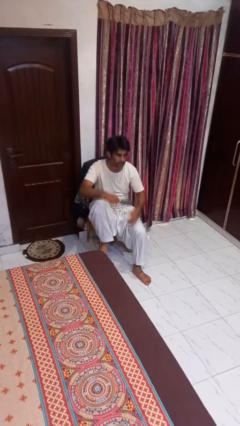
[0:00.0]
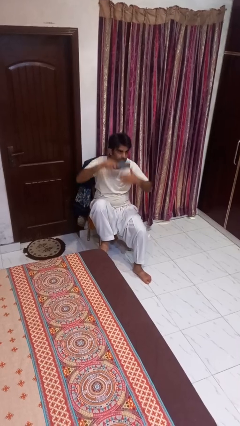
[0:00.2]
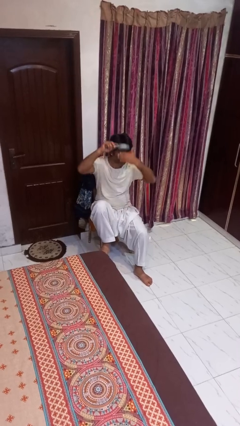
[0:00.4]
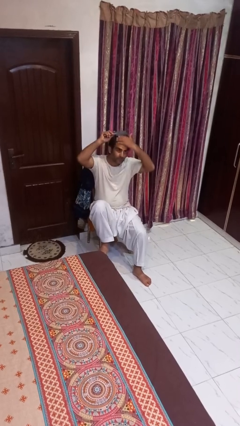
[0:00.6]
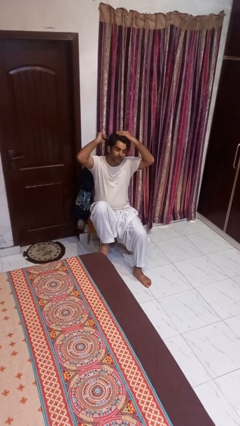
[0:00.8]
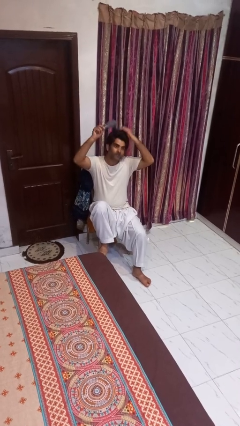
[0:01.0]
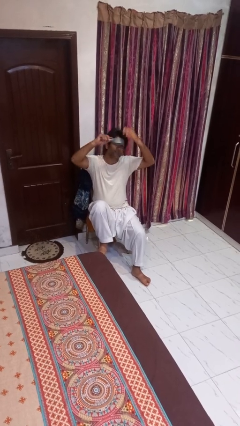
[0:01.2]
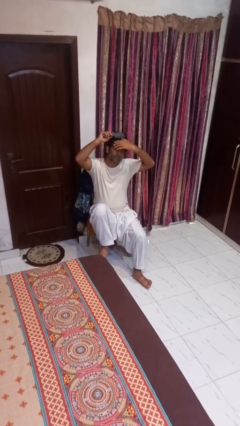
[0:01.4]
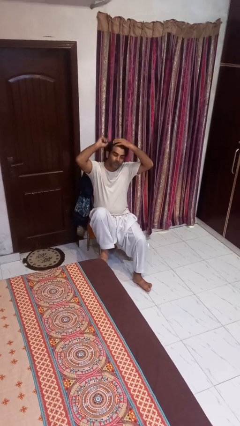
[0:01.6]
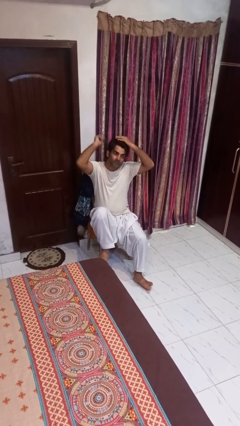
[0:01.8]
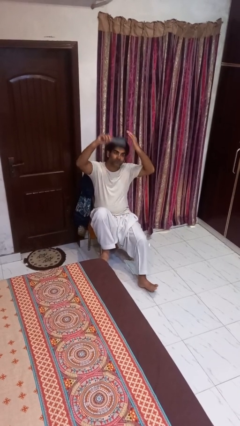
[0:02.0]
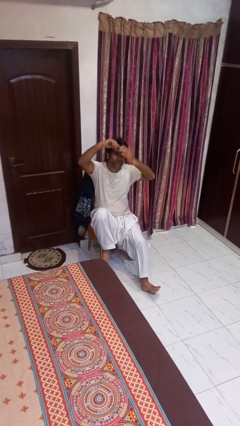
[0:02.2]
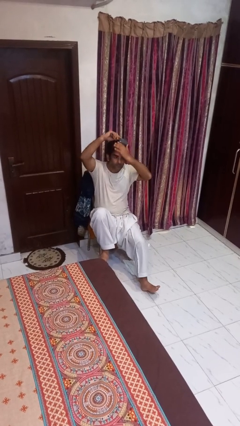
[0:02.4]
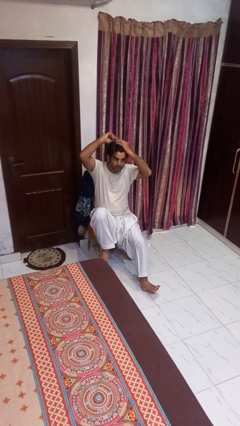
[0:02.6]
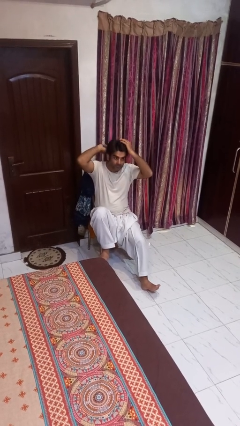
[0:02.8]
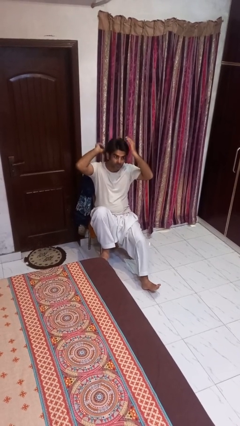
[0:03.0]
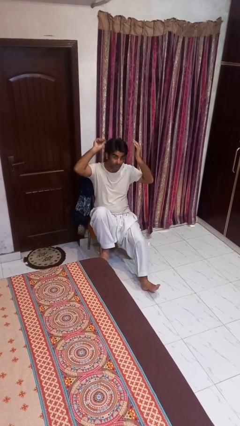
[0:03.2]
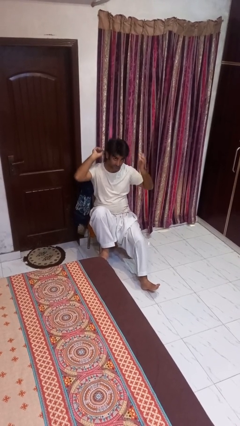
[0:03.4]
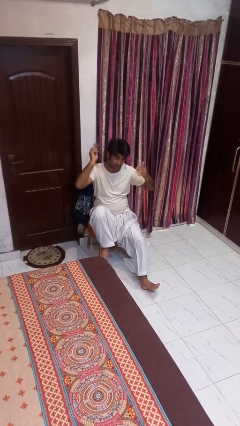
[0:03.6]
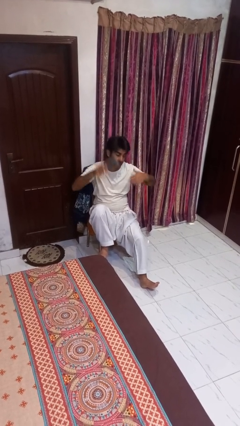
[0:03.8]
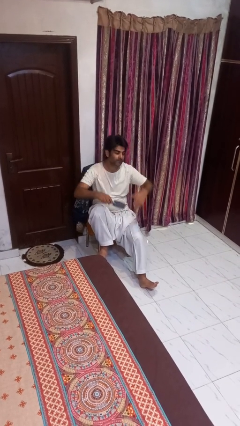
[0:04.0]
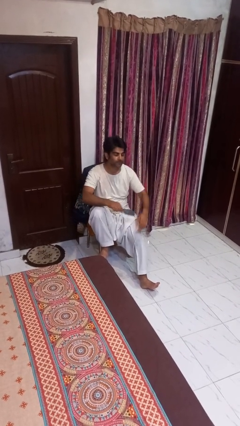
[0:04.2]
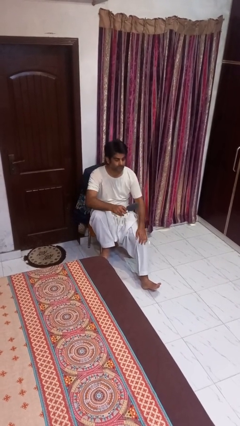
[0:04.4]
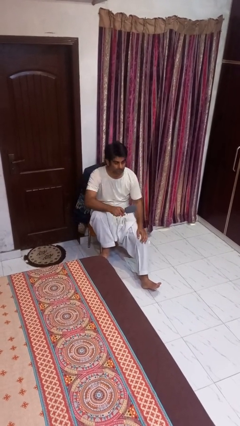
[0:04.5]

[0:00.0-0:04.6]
person brushes hair

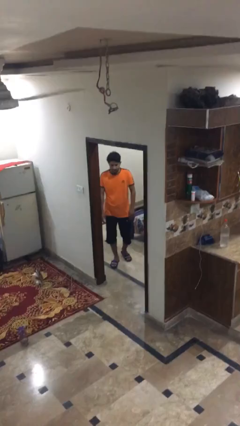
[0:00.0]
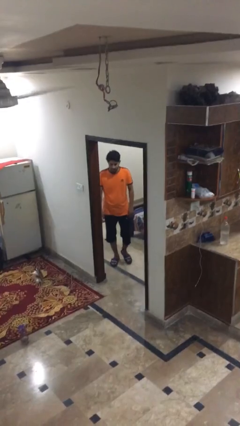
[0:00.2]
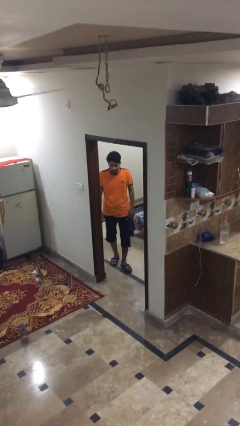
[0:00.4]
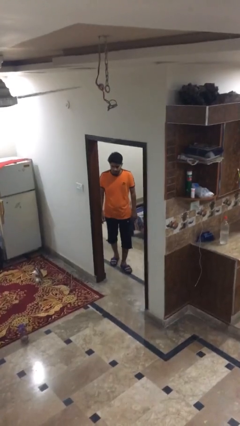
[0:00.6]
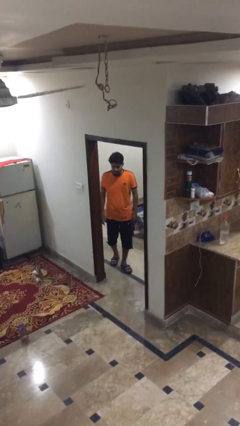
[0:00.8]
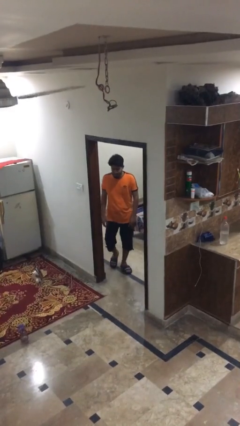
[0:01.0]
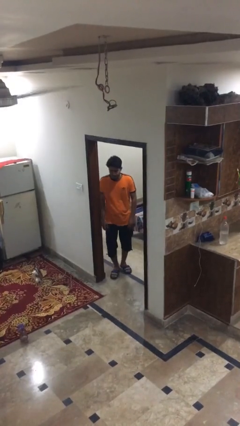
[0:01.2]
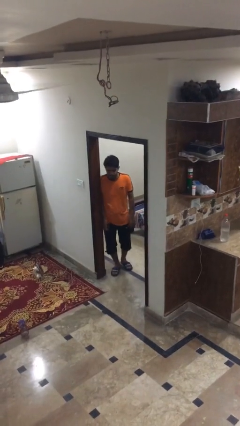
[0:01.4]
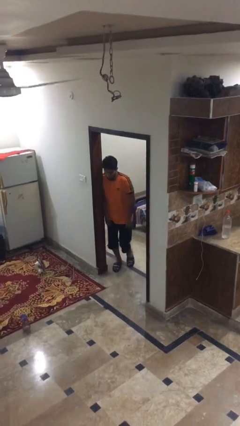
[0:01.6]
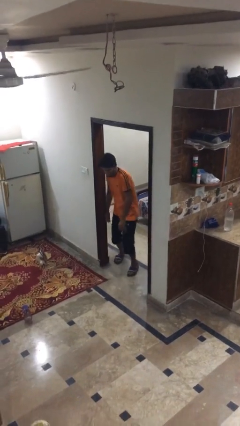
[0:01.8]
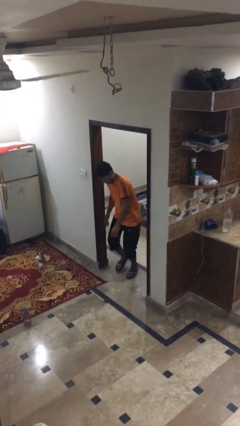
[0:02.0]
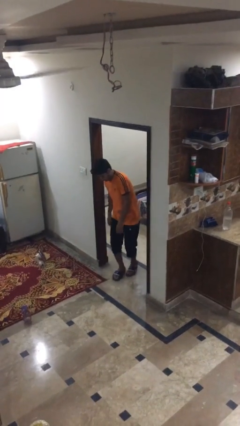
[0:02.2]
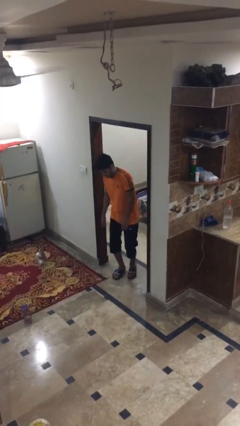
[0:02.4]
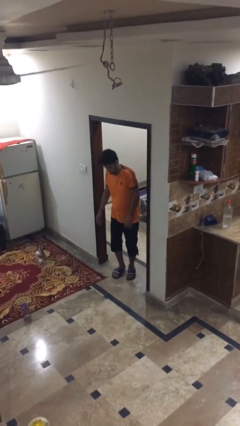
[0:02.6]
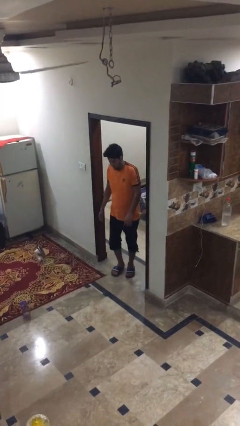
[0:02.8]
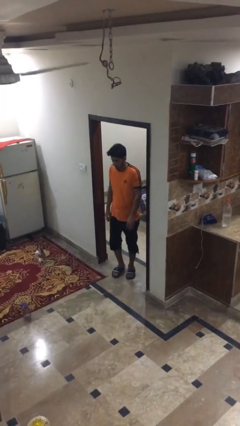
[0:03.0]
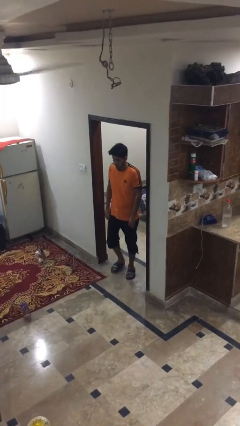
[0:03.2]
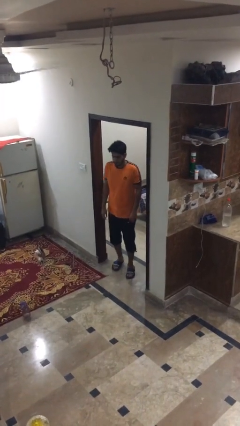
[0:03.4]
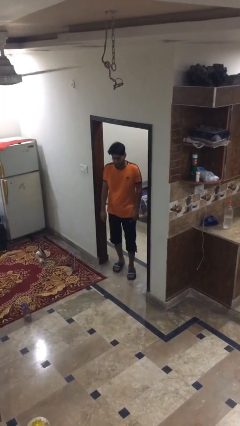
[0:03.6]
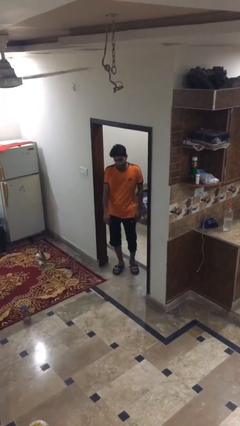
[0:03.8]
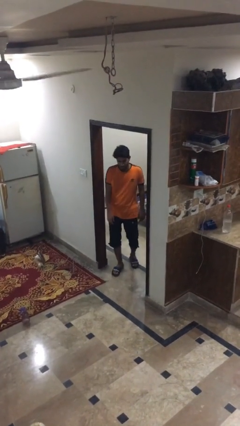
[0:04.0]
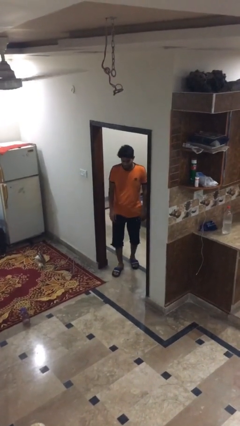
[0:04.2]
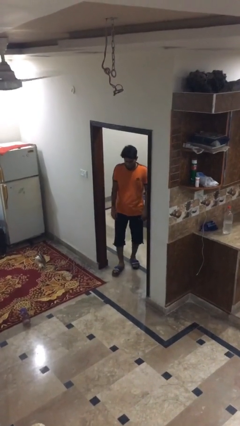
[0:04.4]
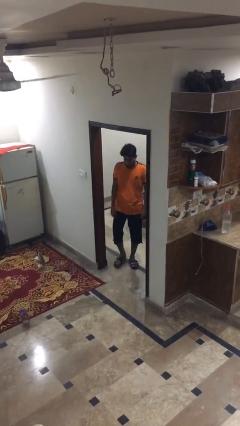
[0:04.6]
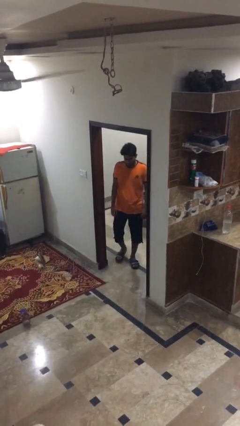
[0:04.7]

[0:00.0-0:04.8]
person bumps into wall

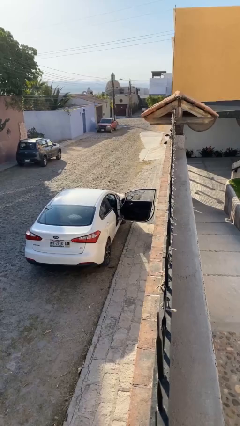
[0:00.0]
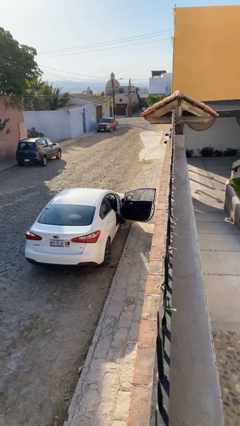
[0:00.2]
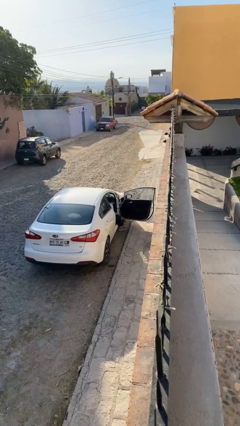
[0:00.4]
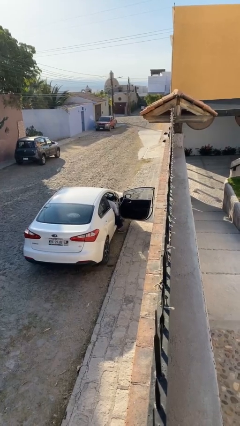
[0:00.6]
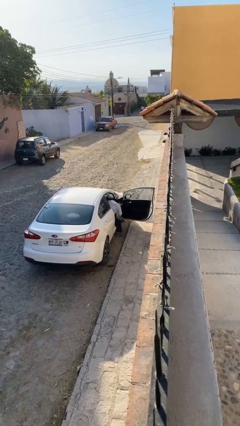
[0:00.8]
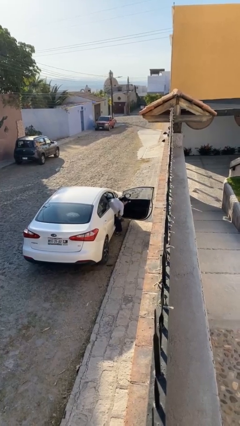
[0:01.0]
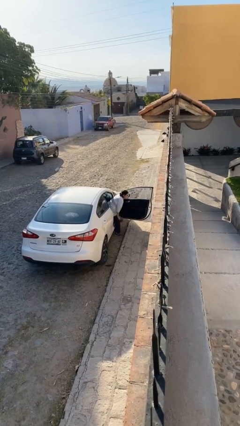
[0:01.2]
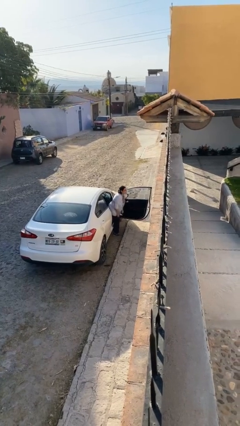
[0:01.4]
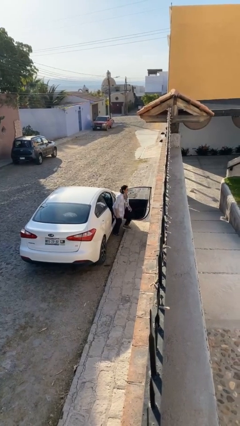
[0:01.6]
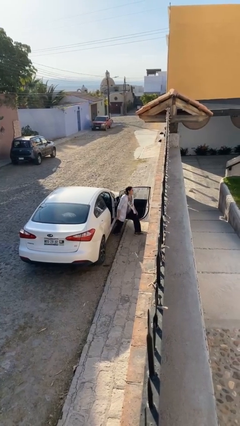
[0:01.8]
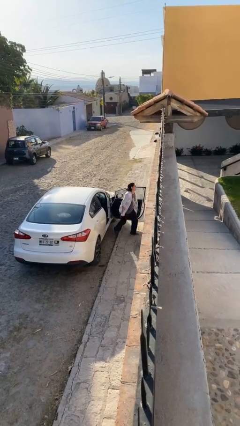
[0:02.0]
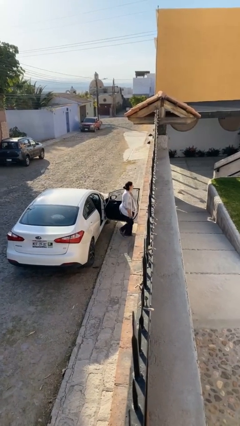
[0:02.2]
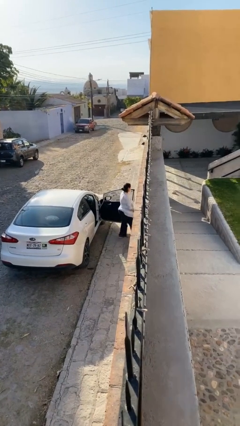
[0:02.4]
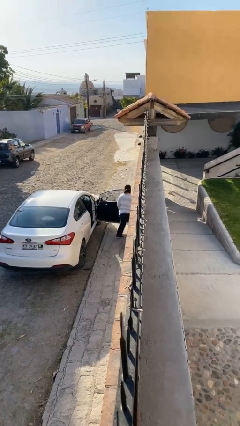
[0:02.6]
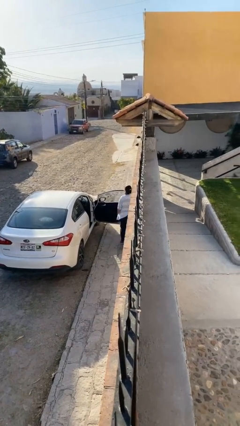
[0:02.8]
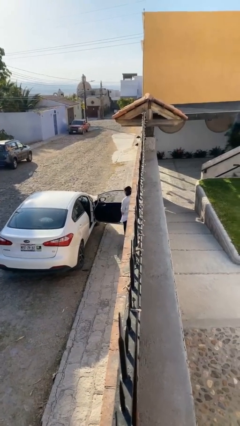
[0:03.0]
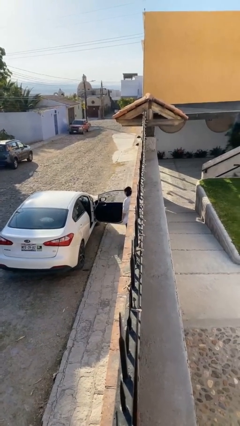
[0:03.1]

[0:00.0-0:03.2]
person exits car

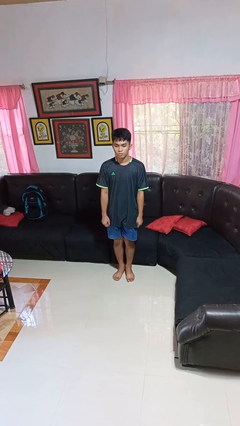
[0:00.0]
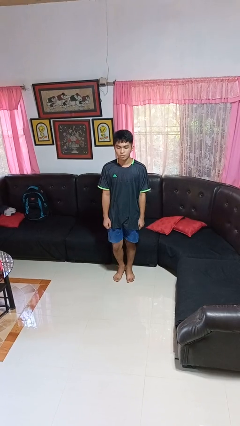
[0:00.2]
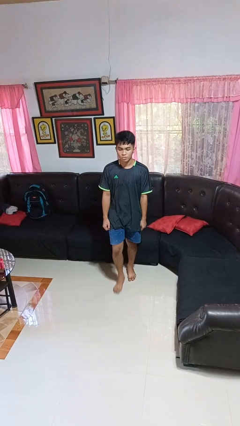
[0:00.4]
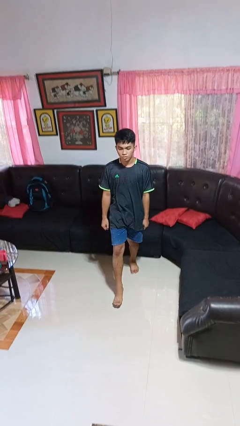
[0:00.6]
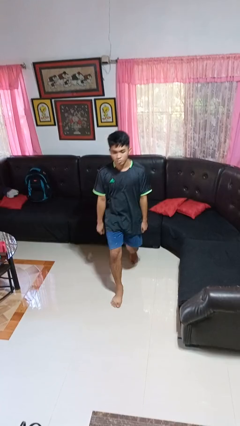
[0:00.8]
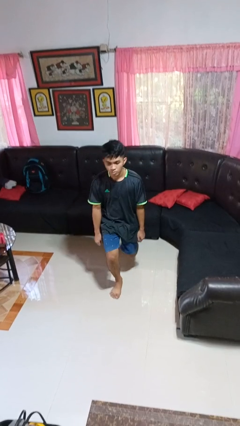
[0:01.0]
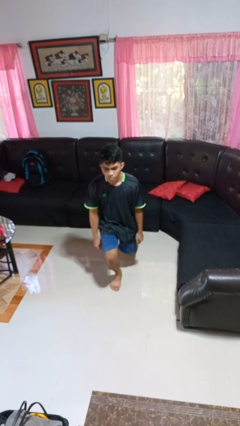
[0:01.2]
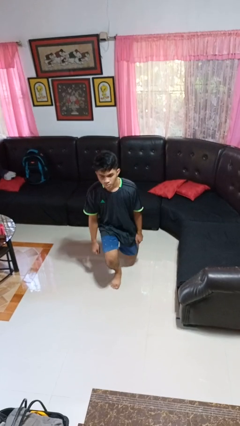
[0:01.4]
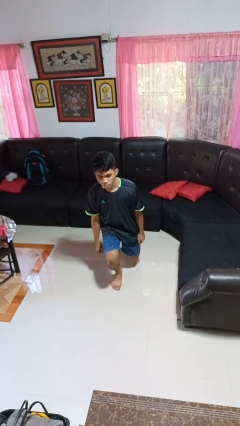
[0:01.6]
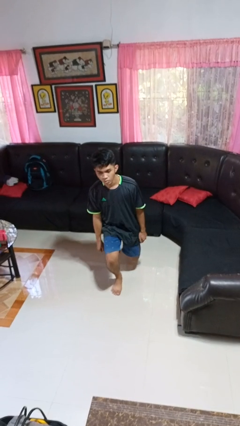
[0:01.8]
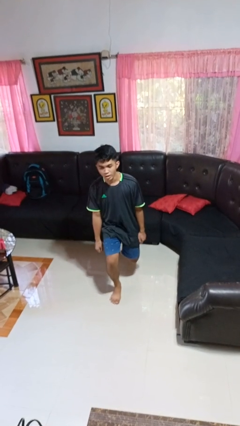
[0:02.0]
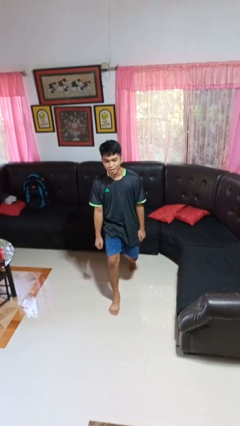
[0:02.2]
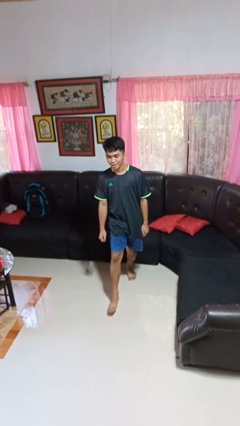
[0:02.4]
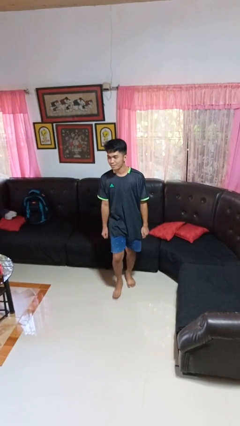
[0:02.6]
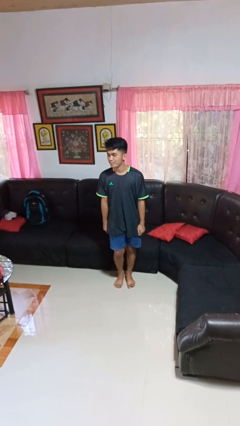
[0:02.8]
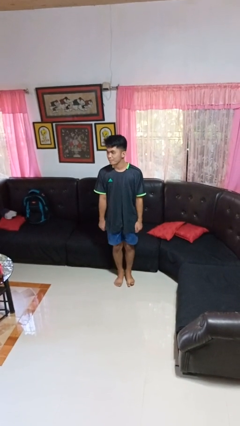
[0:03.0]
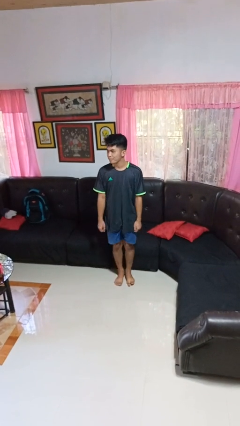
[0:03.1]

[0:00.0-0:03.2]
person exercises with lunges

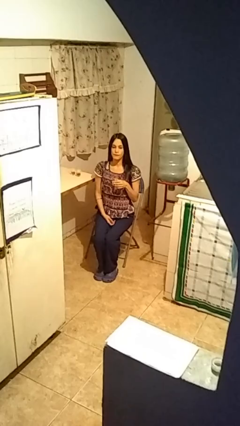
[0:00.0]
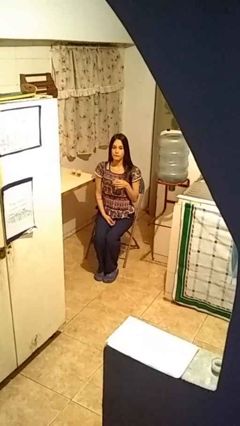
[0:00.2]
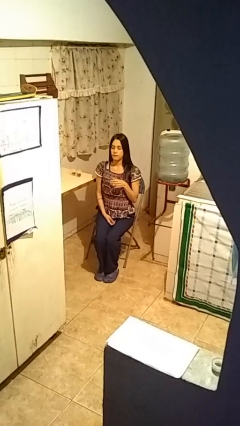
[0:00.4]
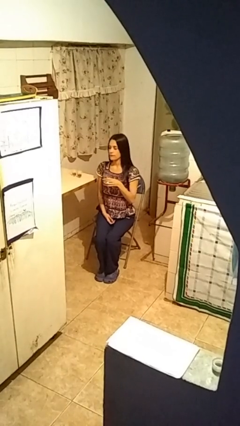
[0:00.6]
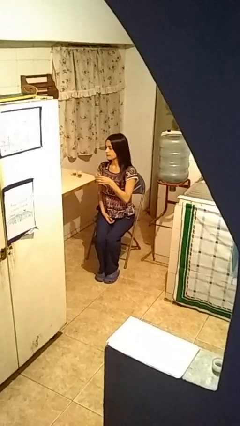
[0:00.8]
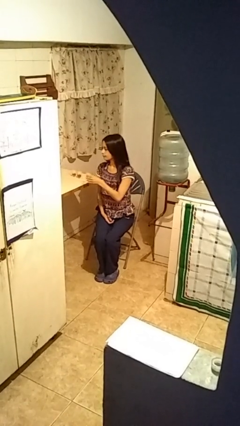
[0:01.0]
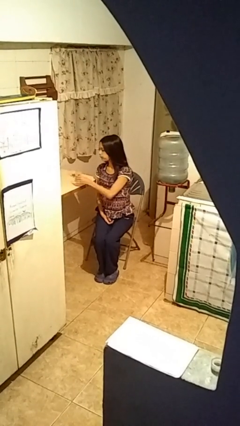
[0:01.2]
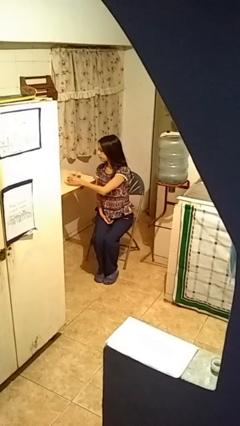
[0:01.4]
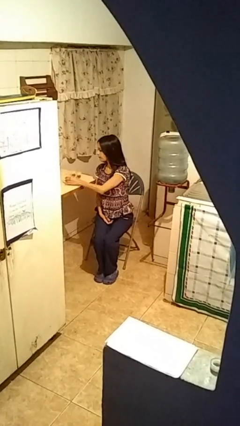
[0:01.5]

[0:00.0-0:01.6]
person puts down object on table
